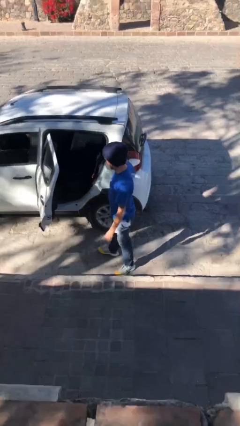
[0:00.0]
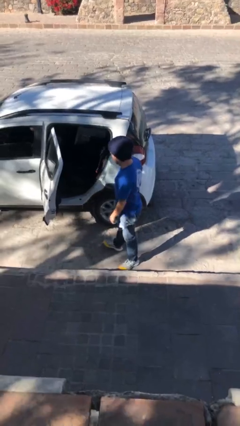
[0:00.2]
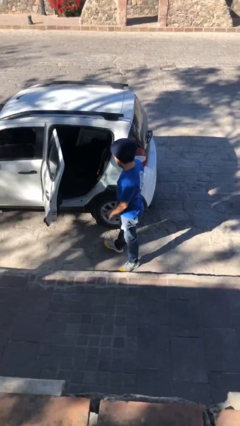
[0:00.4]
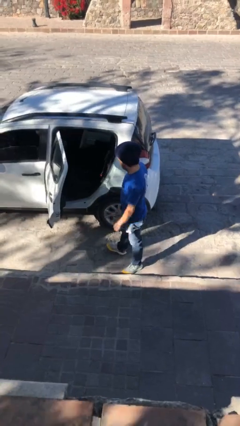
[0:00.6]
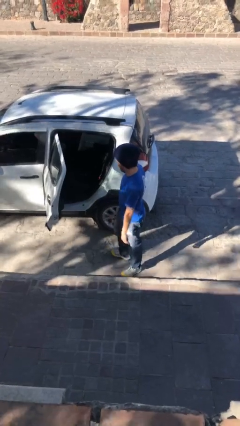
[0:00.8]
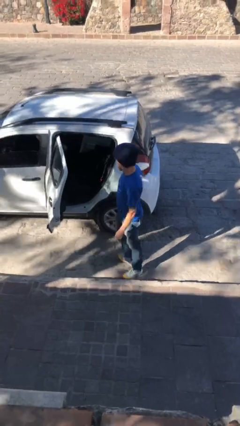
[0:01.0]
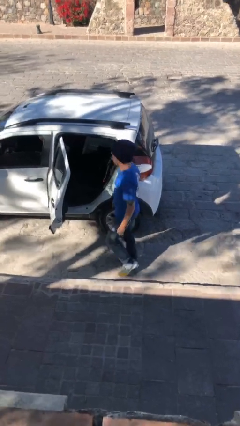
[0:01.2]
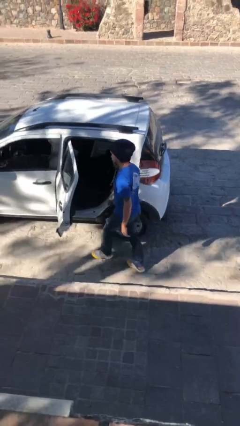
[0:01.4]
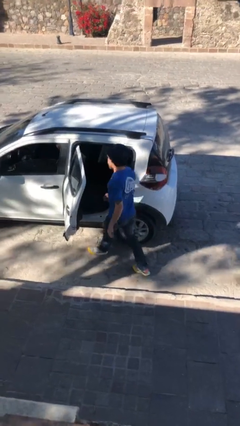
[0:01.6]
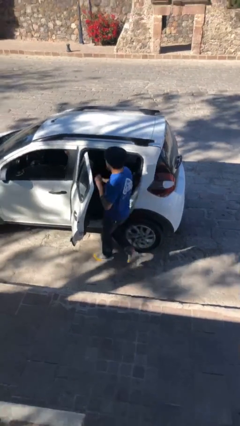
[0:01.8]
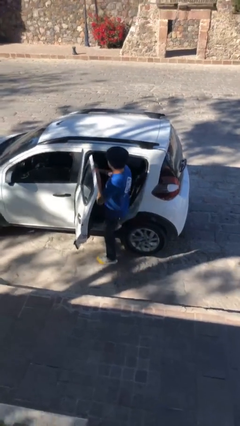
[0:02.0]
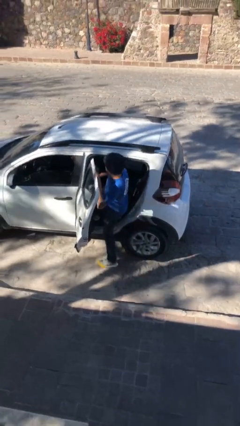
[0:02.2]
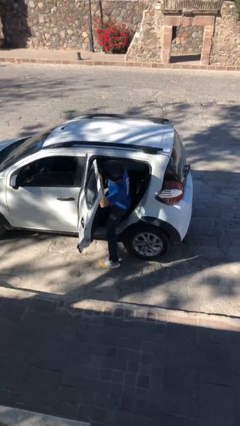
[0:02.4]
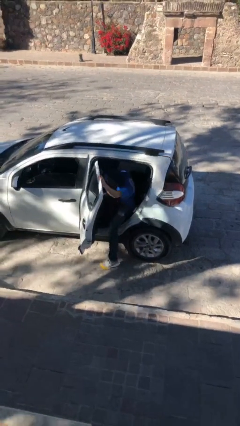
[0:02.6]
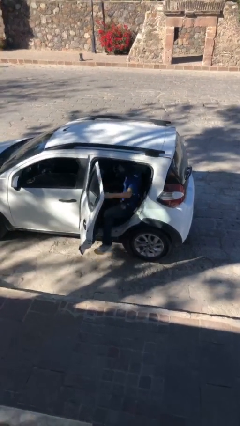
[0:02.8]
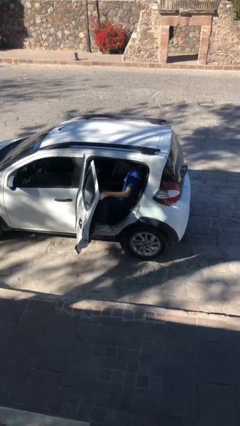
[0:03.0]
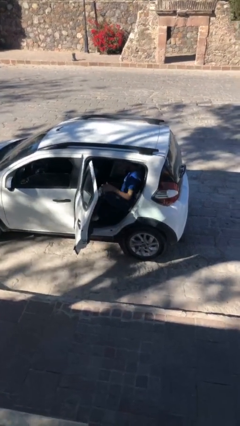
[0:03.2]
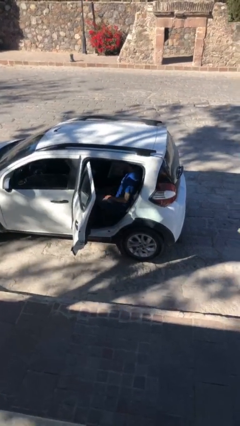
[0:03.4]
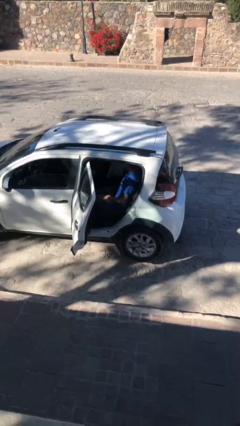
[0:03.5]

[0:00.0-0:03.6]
person enters car

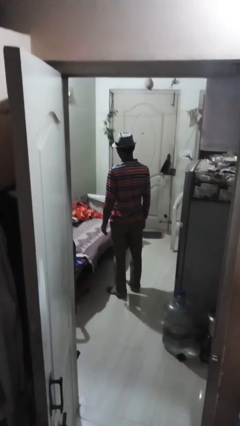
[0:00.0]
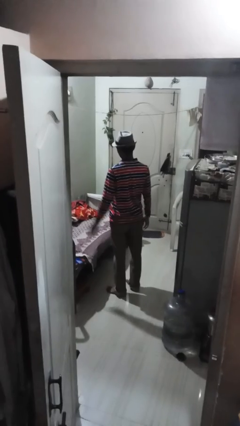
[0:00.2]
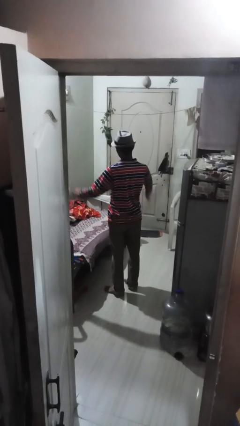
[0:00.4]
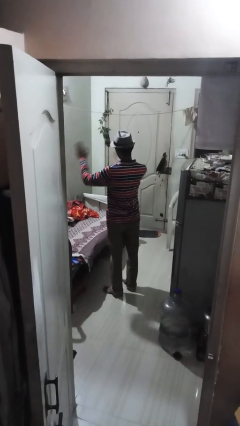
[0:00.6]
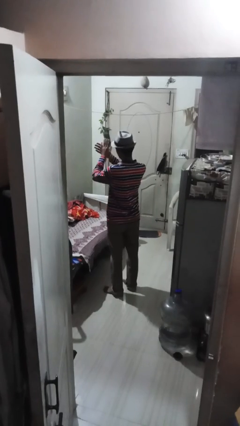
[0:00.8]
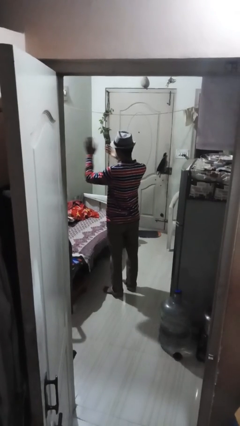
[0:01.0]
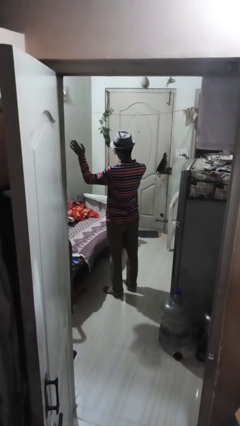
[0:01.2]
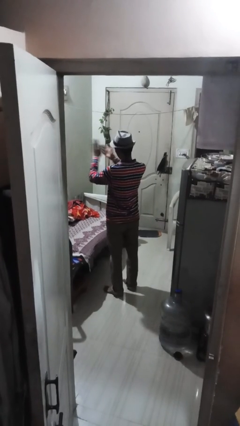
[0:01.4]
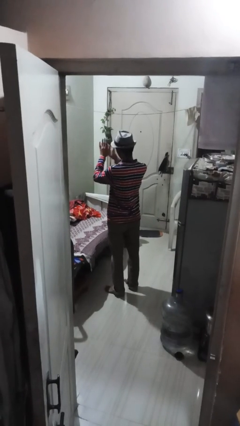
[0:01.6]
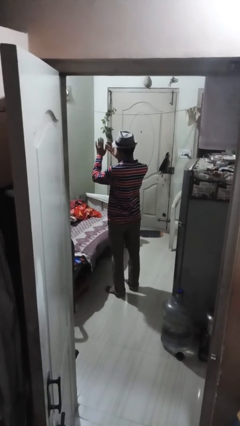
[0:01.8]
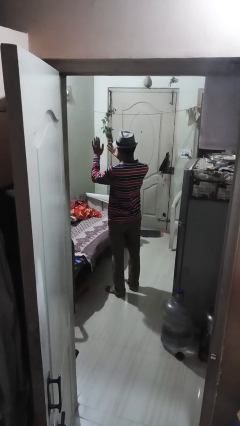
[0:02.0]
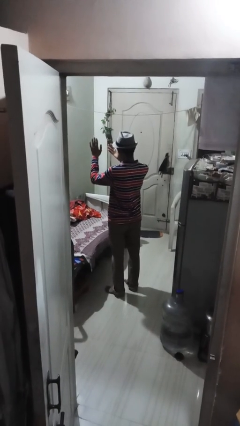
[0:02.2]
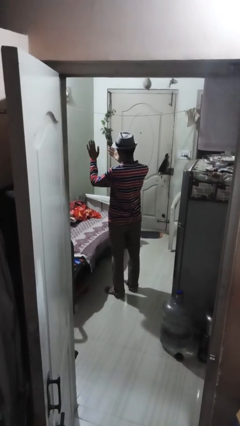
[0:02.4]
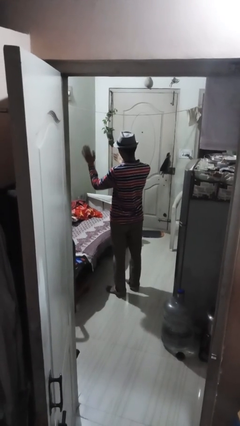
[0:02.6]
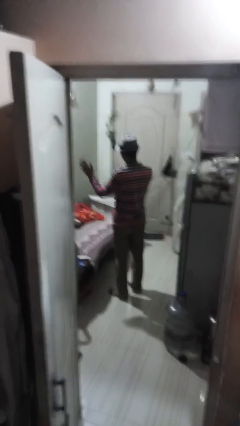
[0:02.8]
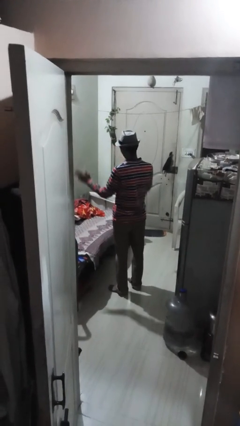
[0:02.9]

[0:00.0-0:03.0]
person claps hands

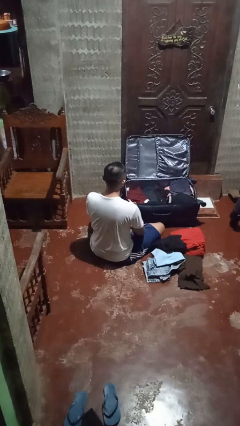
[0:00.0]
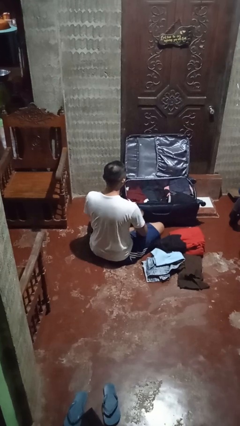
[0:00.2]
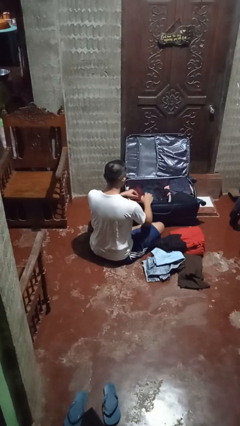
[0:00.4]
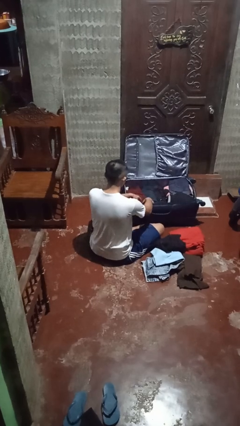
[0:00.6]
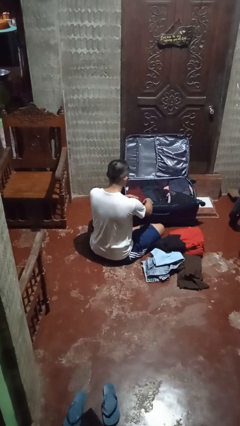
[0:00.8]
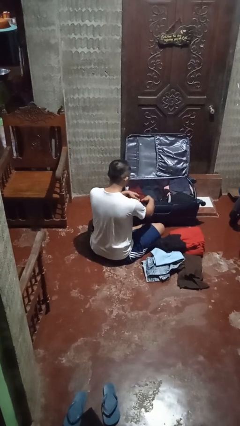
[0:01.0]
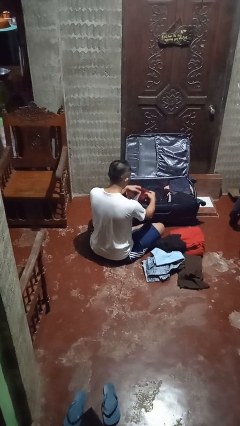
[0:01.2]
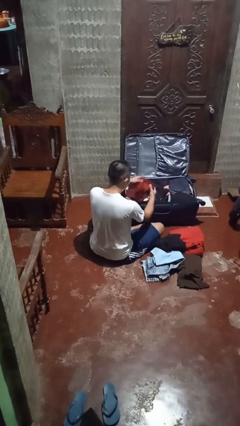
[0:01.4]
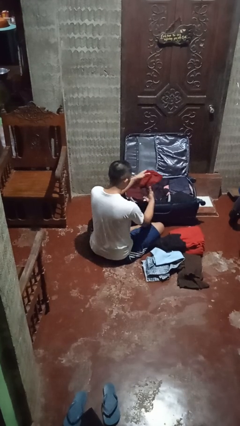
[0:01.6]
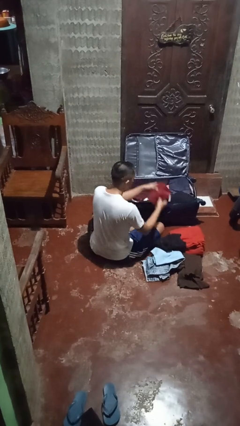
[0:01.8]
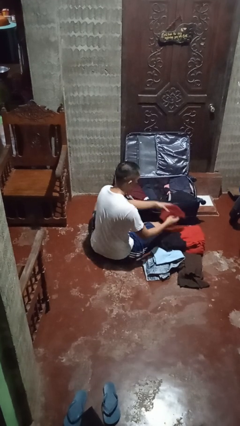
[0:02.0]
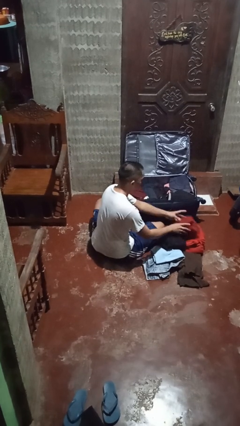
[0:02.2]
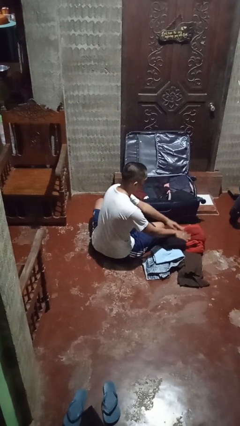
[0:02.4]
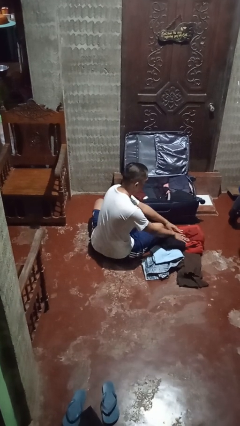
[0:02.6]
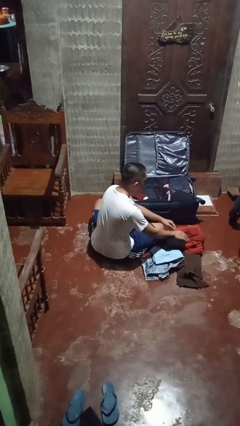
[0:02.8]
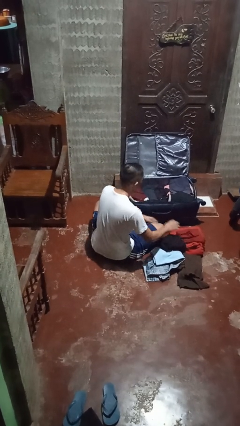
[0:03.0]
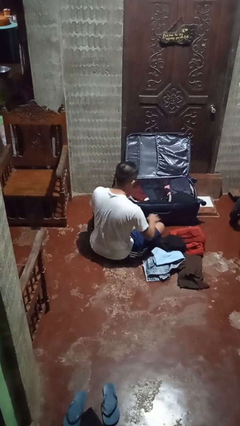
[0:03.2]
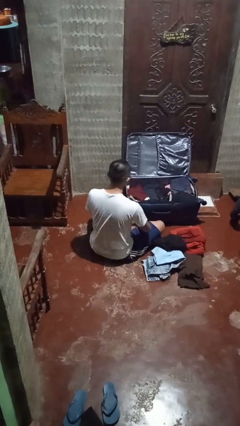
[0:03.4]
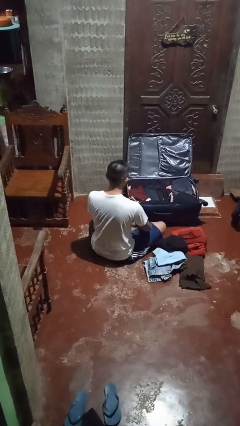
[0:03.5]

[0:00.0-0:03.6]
person unloads clothes from suitcase

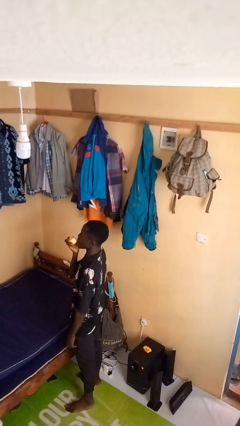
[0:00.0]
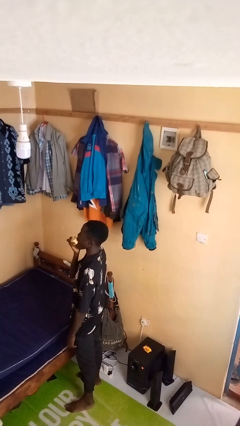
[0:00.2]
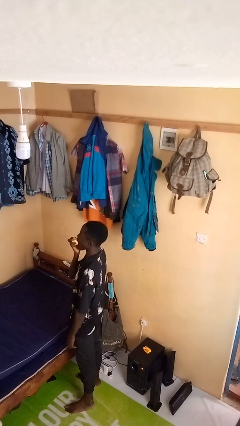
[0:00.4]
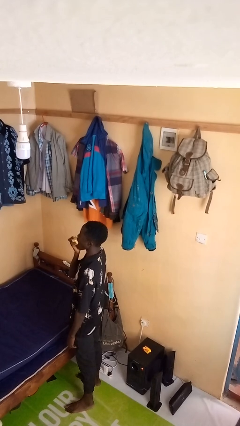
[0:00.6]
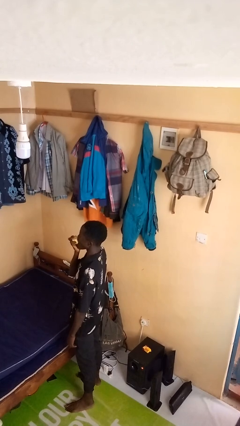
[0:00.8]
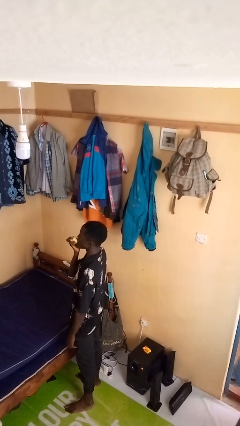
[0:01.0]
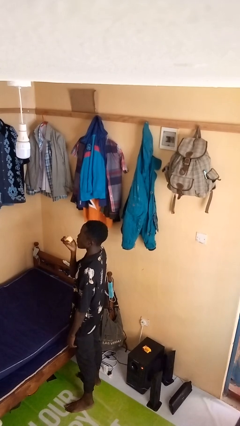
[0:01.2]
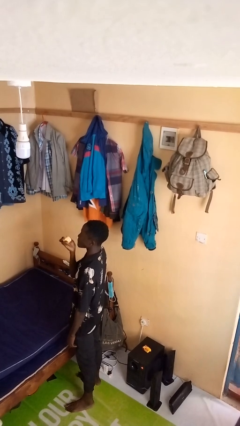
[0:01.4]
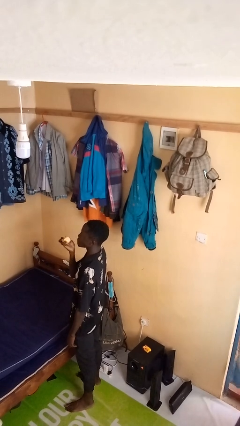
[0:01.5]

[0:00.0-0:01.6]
person eats apple

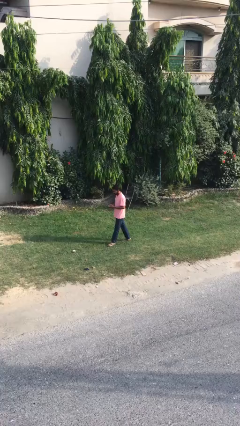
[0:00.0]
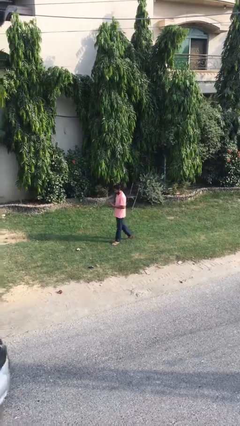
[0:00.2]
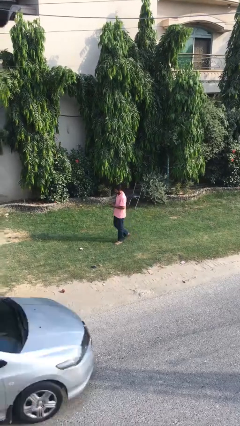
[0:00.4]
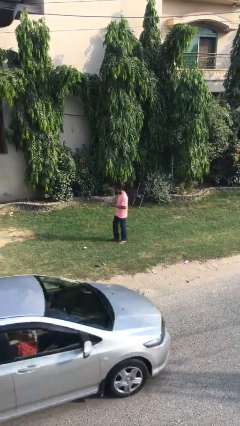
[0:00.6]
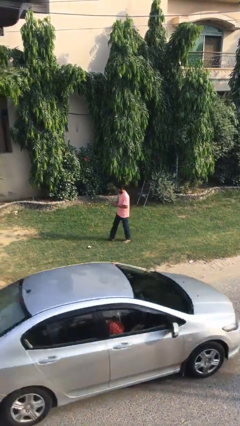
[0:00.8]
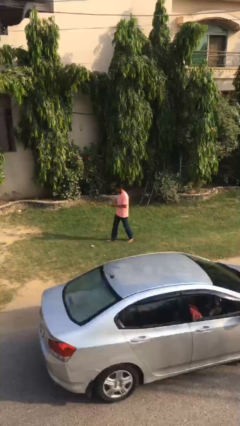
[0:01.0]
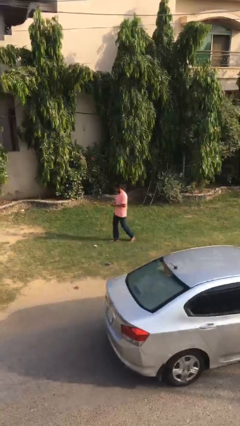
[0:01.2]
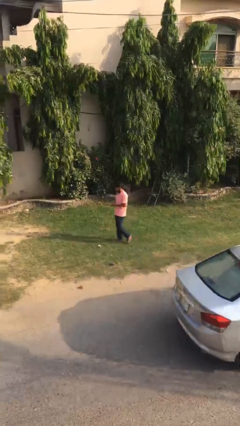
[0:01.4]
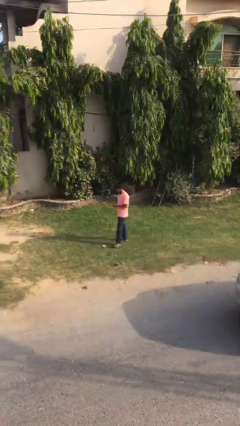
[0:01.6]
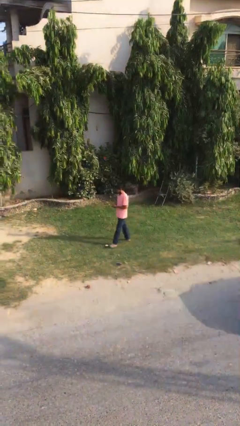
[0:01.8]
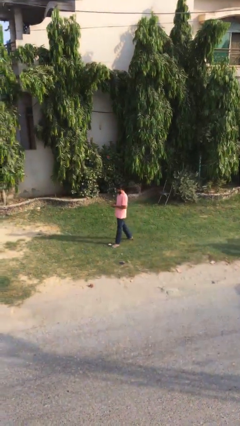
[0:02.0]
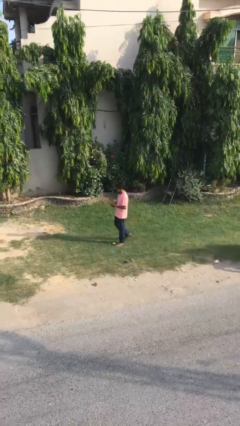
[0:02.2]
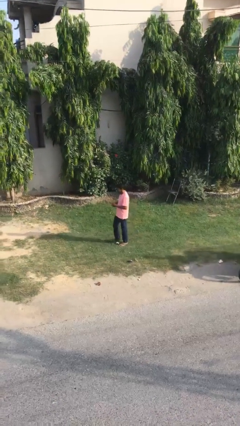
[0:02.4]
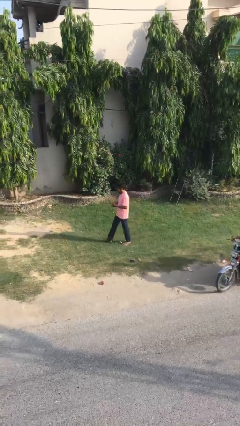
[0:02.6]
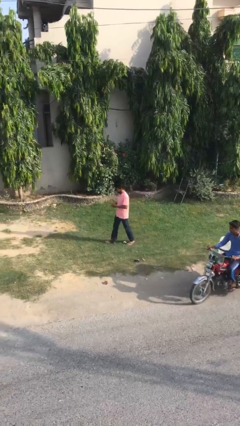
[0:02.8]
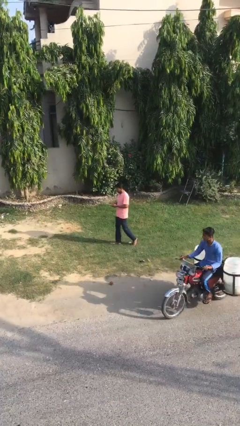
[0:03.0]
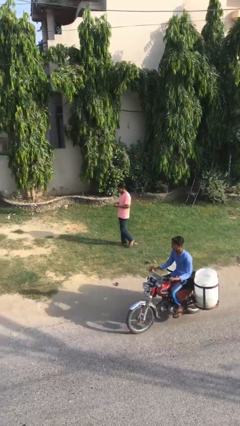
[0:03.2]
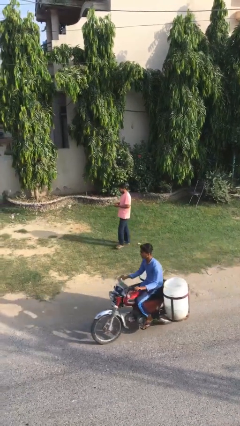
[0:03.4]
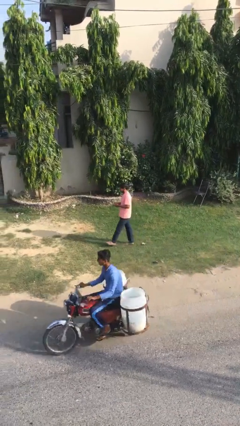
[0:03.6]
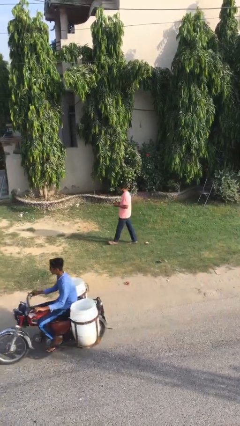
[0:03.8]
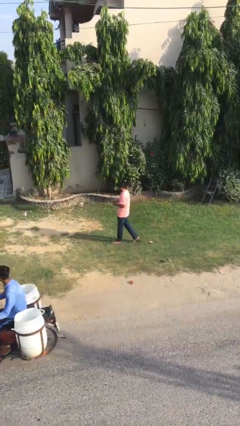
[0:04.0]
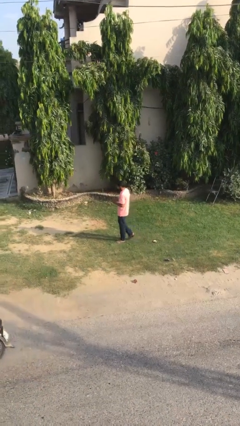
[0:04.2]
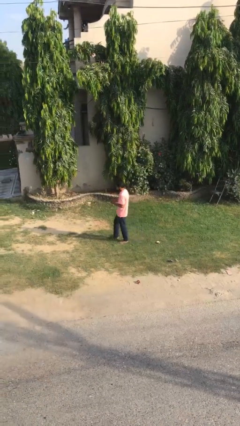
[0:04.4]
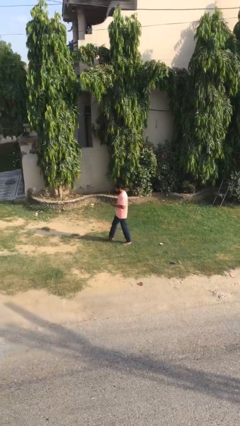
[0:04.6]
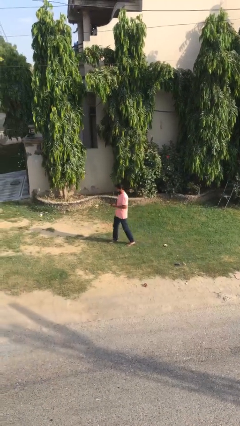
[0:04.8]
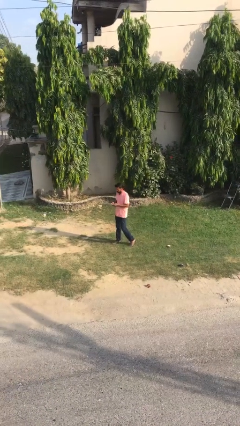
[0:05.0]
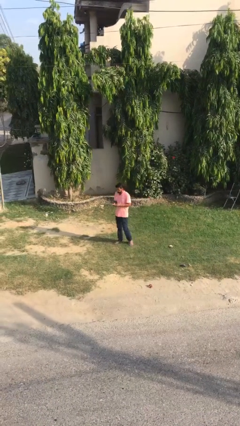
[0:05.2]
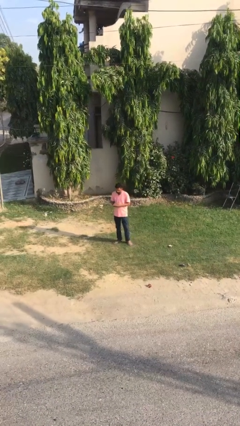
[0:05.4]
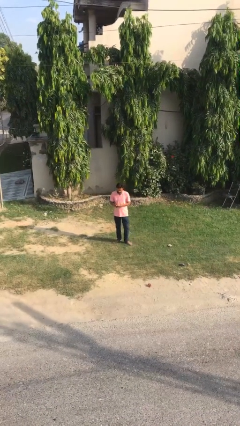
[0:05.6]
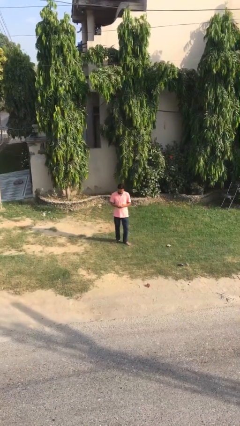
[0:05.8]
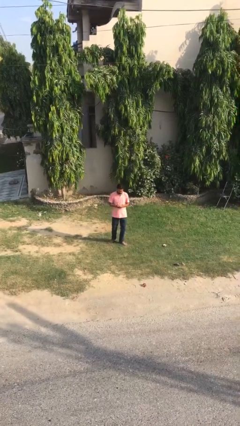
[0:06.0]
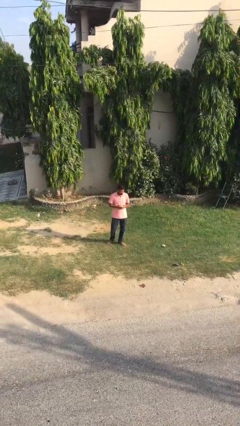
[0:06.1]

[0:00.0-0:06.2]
person texts on phone
